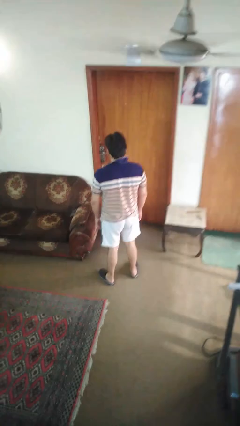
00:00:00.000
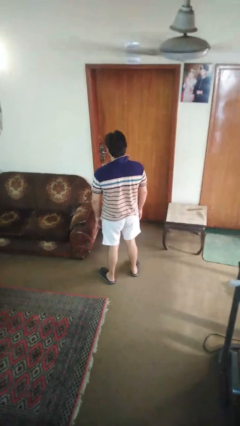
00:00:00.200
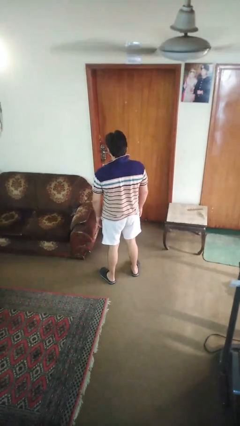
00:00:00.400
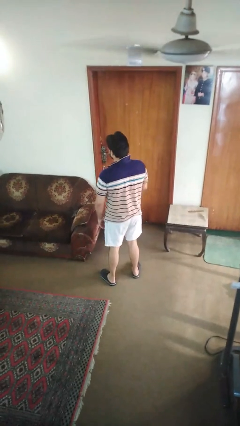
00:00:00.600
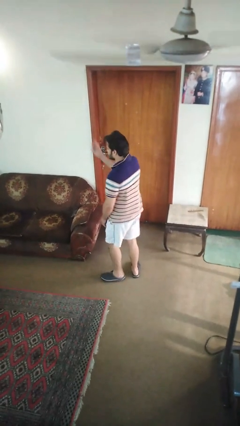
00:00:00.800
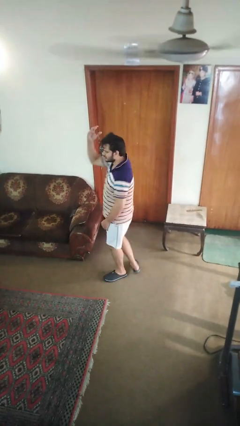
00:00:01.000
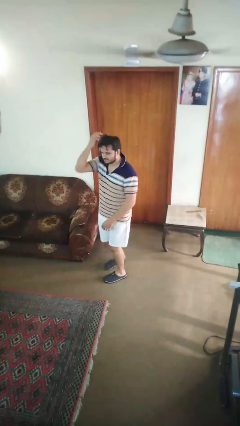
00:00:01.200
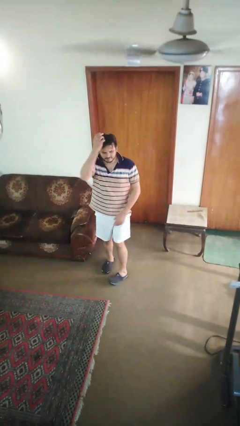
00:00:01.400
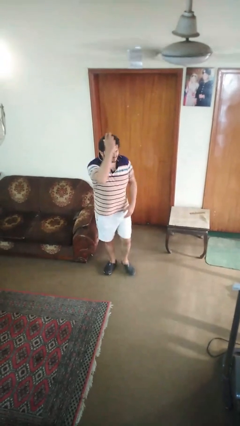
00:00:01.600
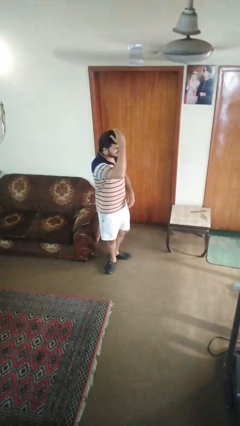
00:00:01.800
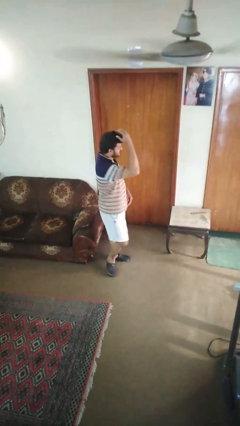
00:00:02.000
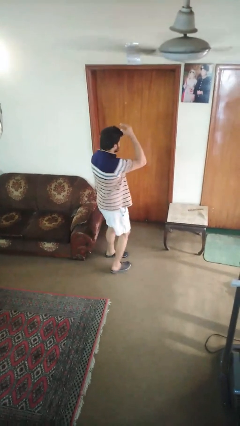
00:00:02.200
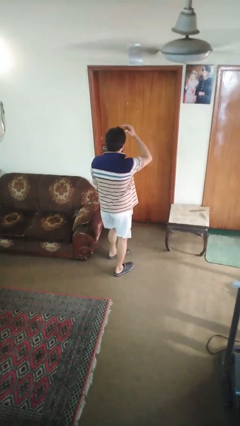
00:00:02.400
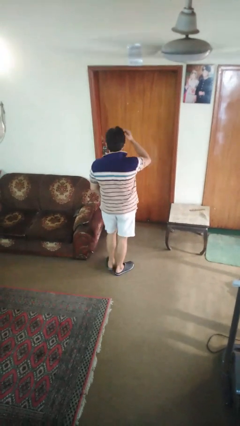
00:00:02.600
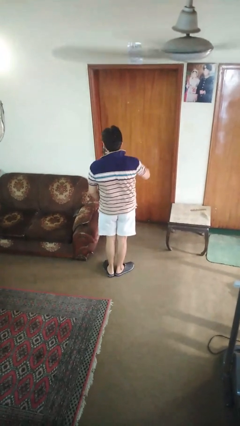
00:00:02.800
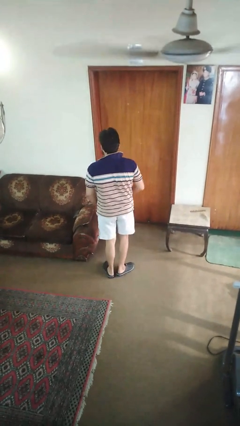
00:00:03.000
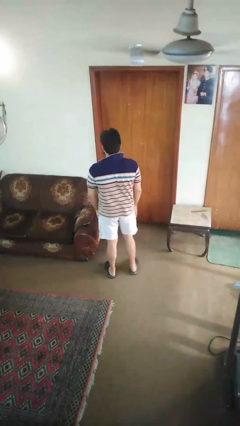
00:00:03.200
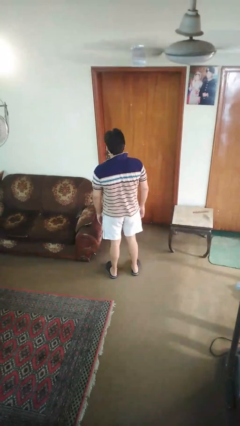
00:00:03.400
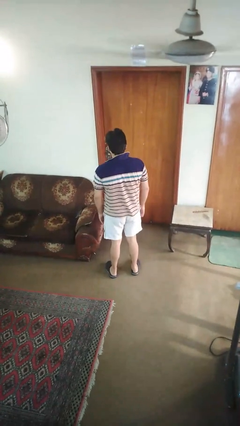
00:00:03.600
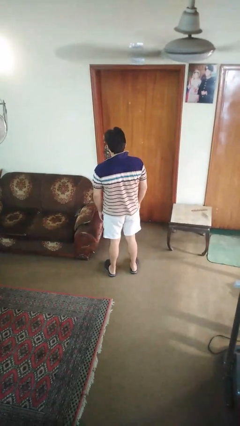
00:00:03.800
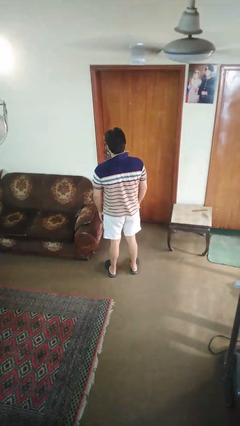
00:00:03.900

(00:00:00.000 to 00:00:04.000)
person twirls

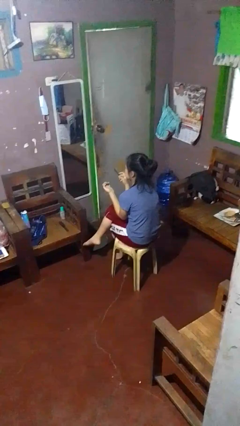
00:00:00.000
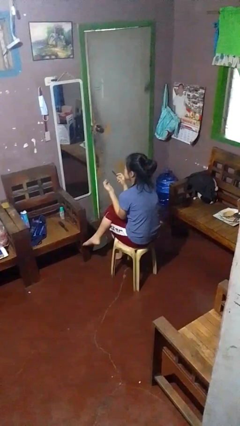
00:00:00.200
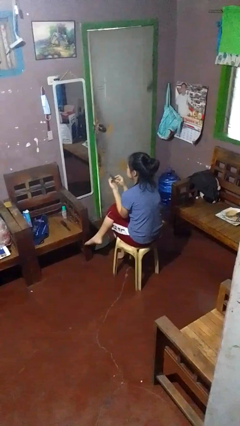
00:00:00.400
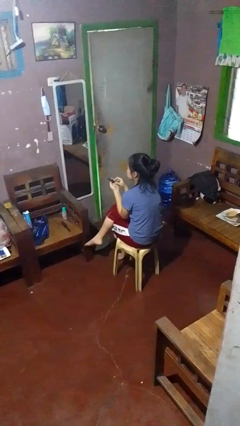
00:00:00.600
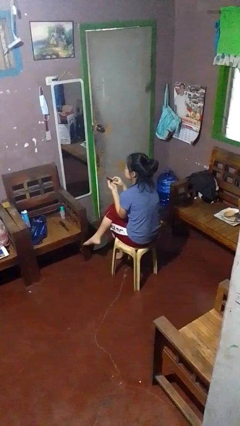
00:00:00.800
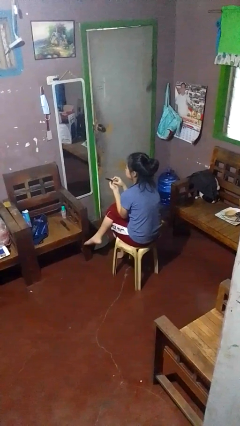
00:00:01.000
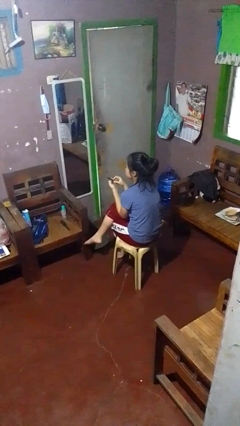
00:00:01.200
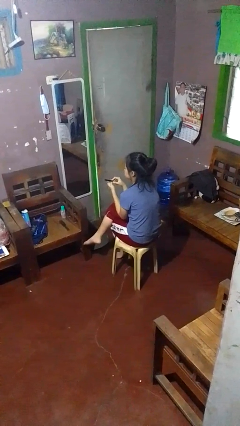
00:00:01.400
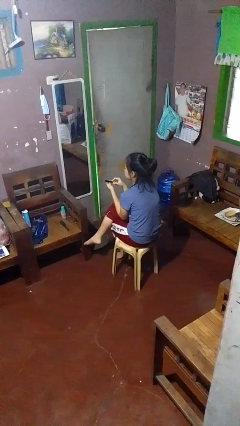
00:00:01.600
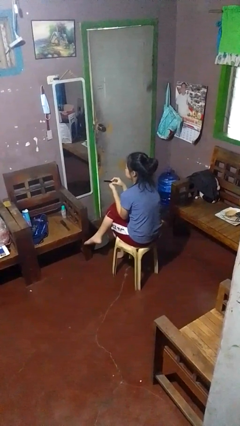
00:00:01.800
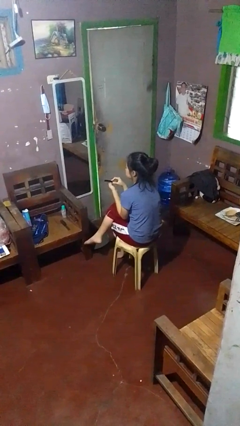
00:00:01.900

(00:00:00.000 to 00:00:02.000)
person files fingernails

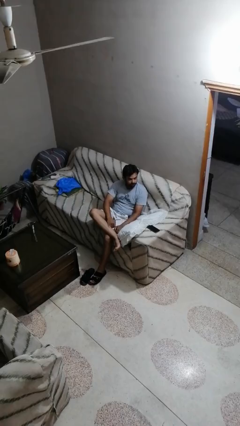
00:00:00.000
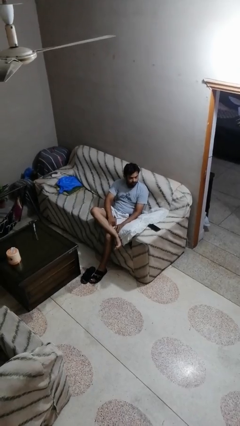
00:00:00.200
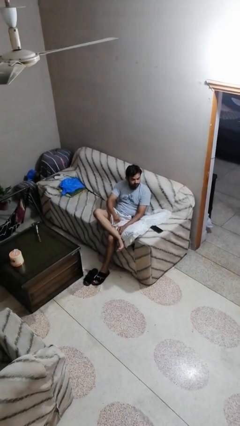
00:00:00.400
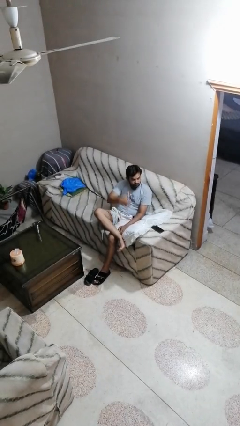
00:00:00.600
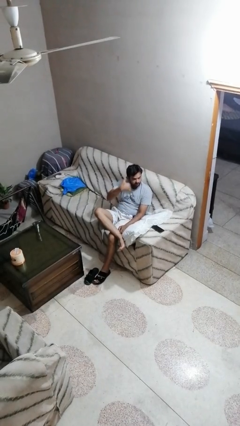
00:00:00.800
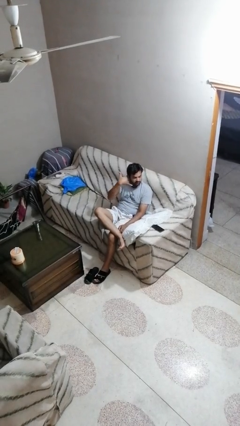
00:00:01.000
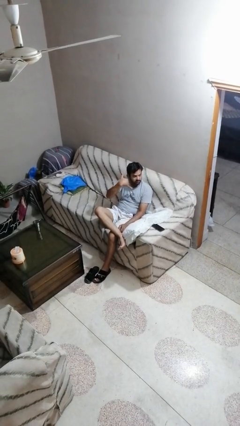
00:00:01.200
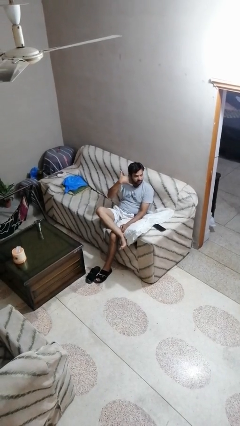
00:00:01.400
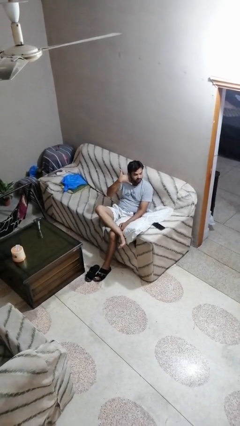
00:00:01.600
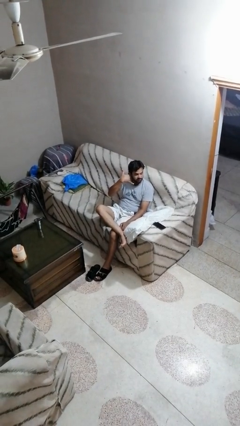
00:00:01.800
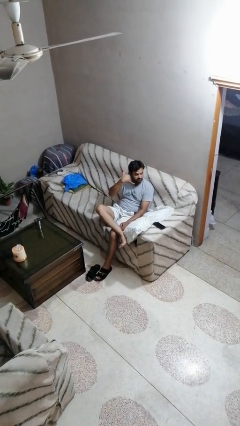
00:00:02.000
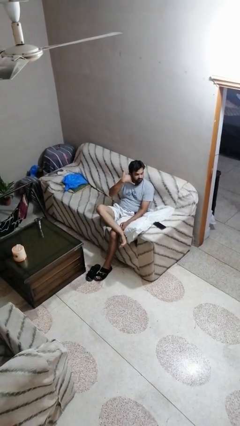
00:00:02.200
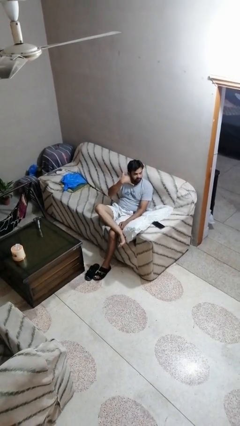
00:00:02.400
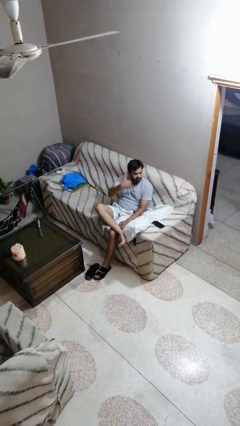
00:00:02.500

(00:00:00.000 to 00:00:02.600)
person gestures call me

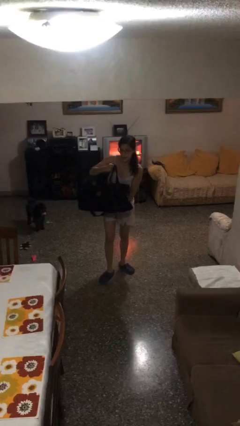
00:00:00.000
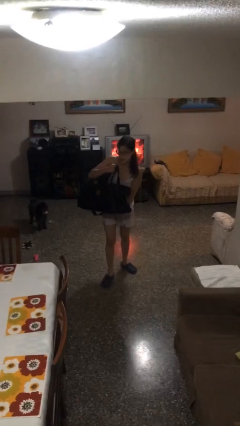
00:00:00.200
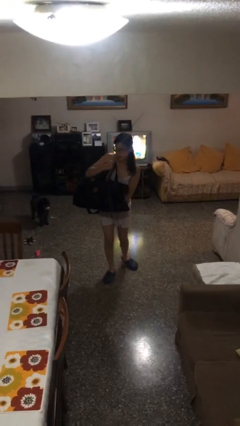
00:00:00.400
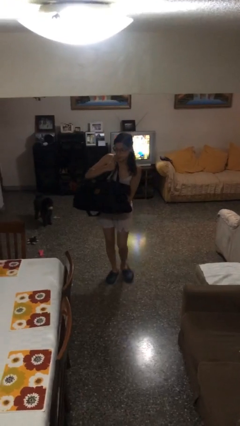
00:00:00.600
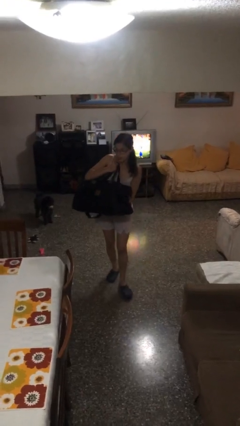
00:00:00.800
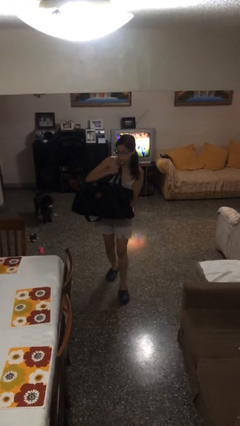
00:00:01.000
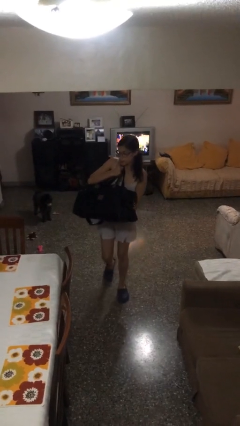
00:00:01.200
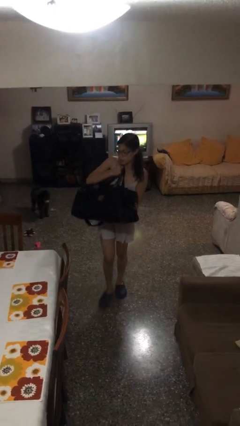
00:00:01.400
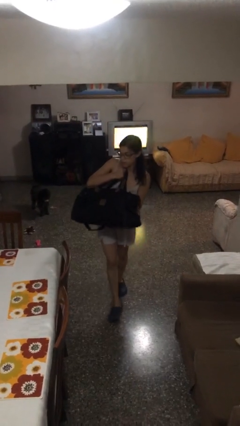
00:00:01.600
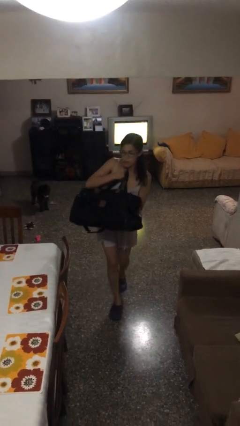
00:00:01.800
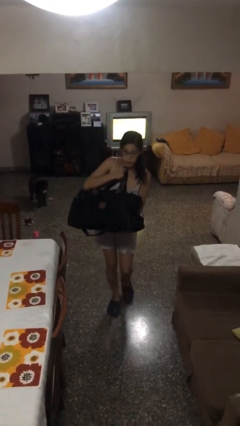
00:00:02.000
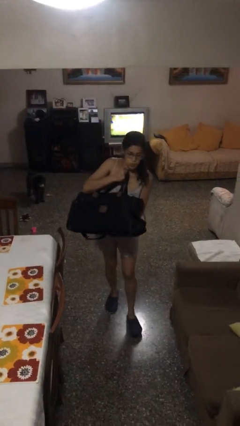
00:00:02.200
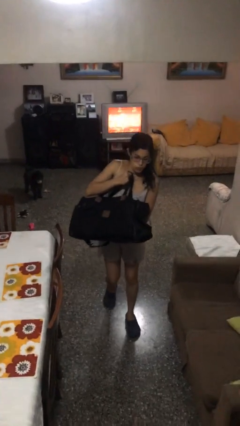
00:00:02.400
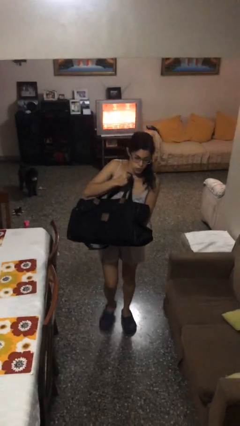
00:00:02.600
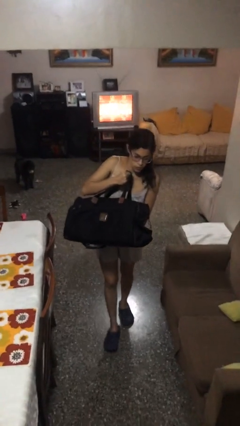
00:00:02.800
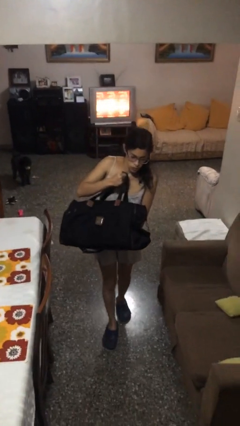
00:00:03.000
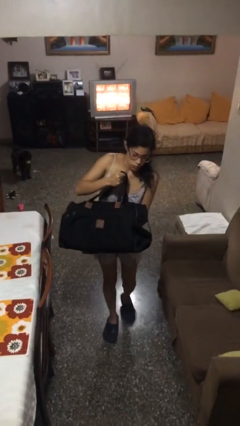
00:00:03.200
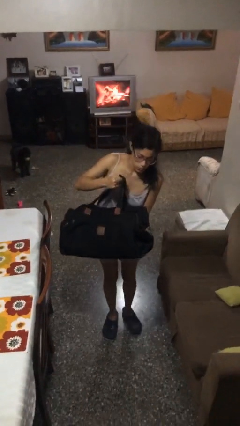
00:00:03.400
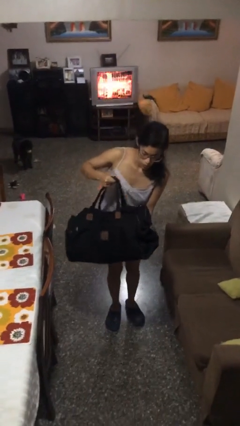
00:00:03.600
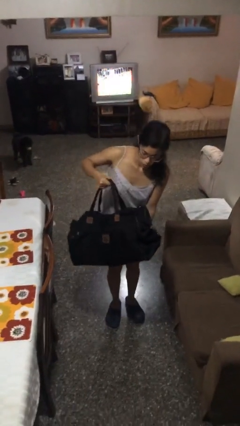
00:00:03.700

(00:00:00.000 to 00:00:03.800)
person carries heavy object

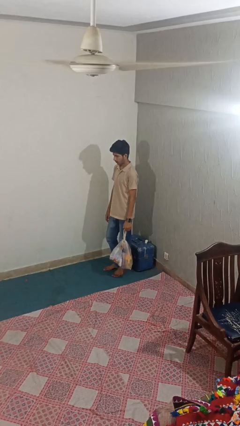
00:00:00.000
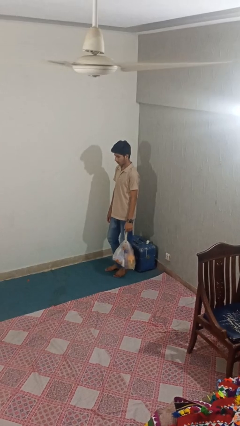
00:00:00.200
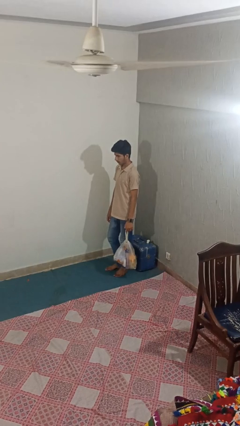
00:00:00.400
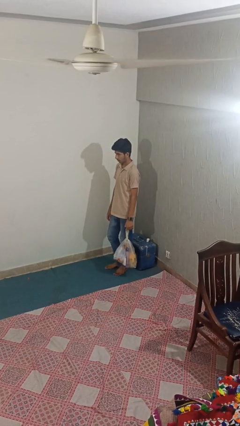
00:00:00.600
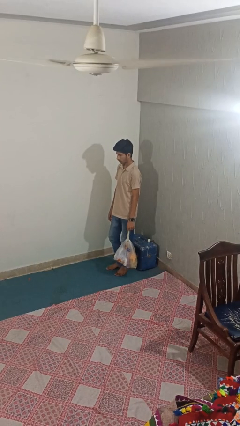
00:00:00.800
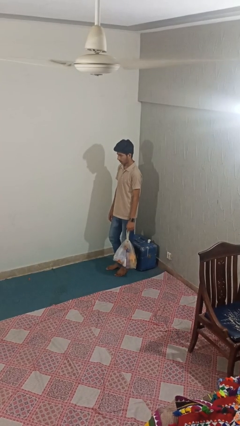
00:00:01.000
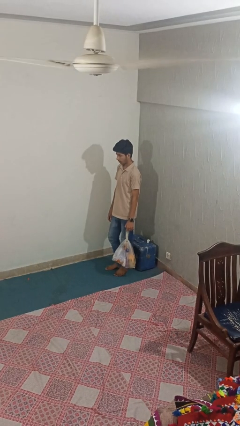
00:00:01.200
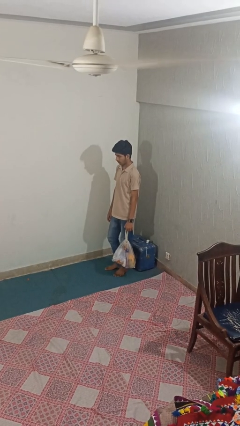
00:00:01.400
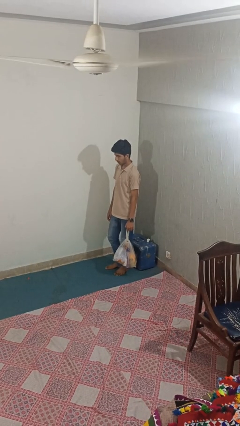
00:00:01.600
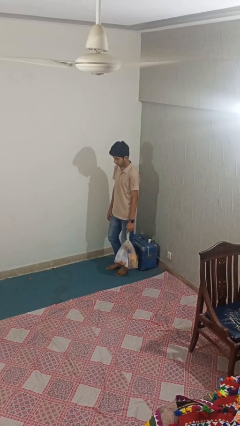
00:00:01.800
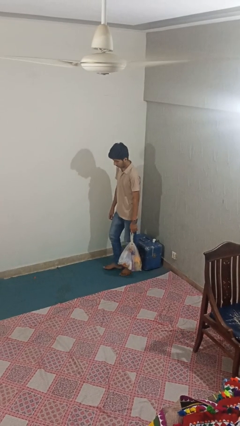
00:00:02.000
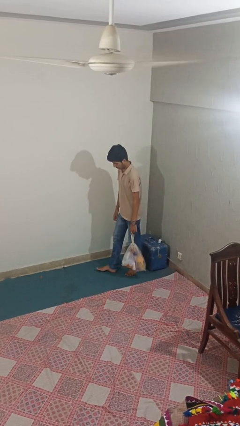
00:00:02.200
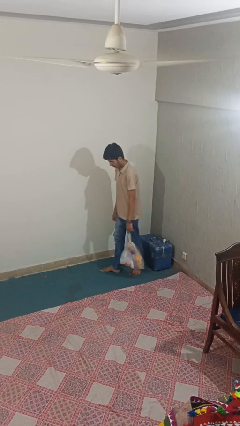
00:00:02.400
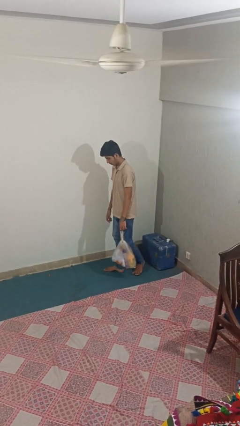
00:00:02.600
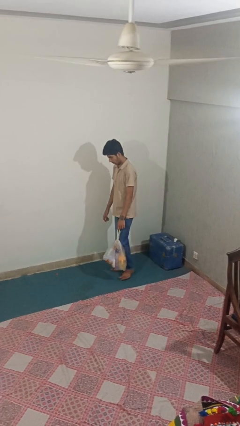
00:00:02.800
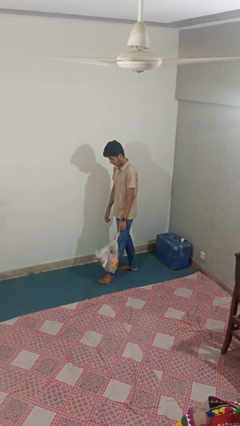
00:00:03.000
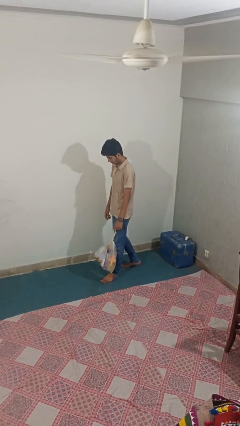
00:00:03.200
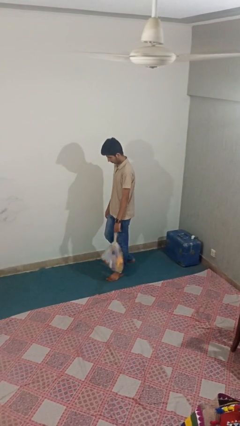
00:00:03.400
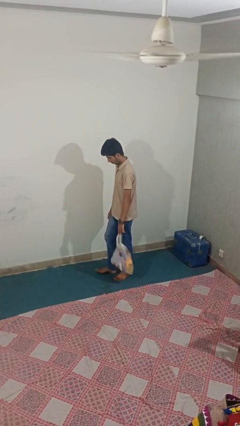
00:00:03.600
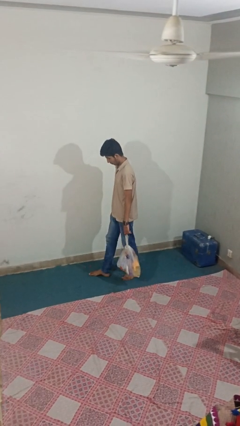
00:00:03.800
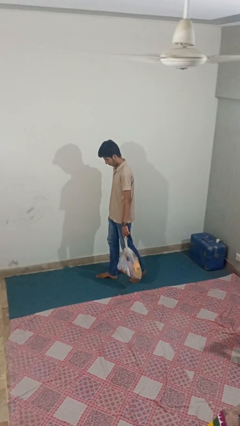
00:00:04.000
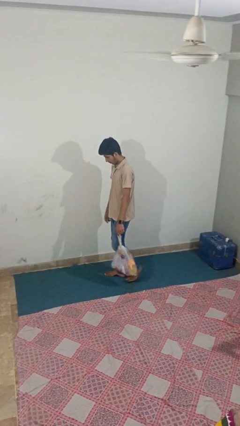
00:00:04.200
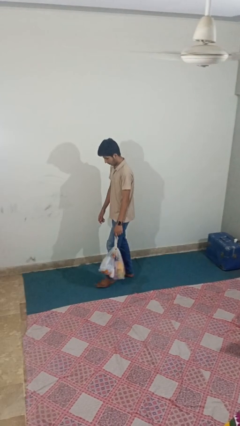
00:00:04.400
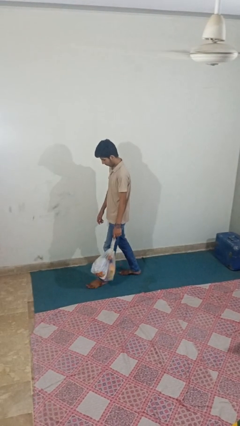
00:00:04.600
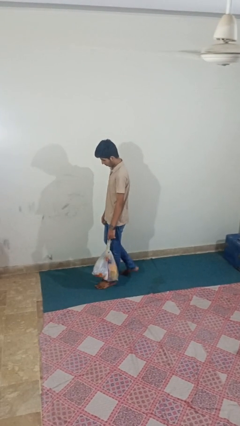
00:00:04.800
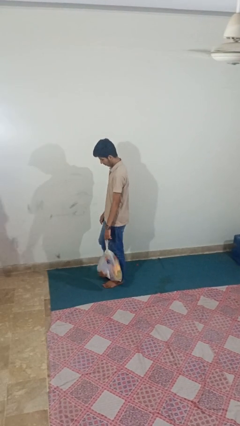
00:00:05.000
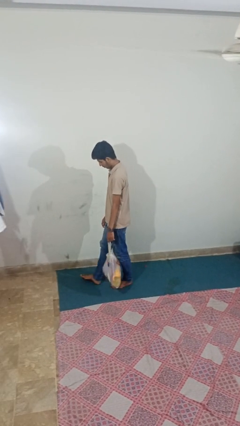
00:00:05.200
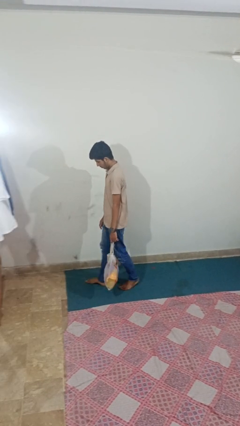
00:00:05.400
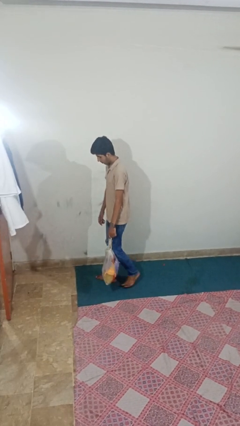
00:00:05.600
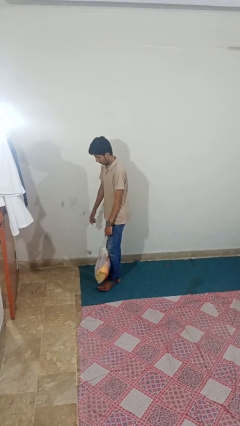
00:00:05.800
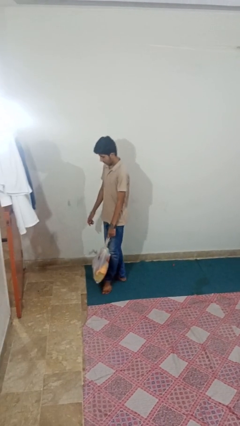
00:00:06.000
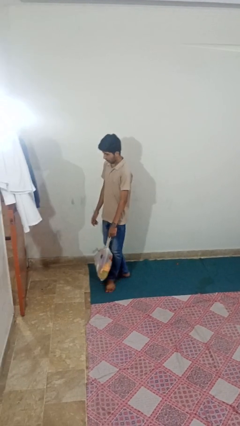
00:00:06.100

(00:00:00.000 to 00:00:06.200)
person carries groceries
